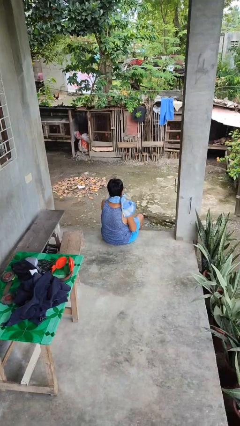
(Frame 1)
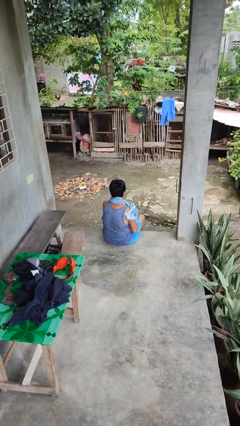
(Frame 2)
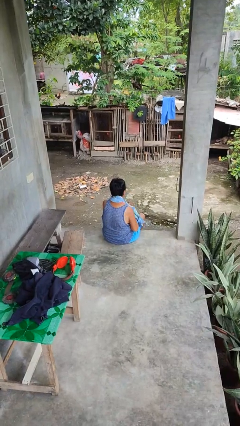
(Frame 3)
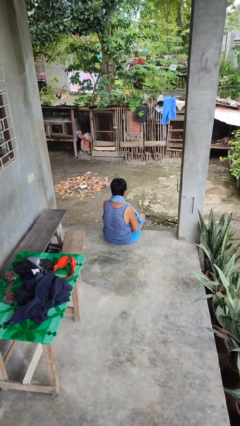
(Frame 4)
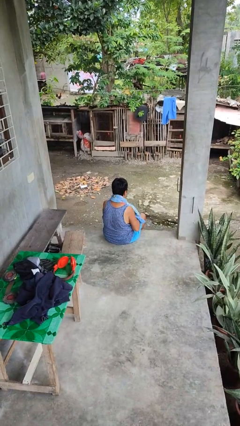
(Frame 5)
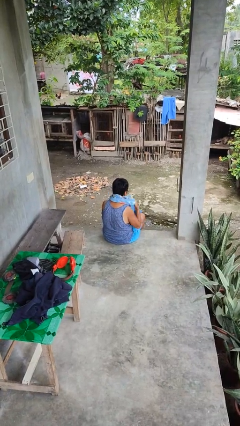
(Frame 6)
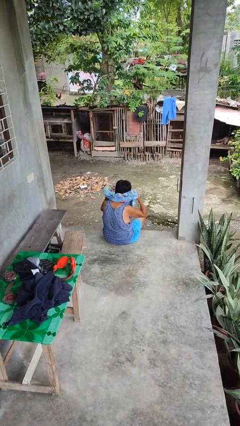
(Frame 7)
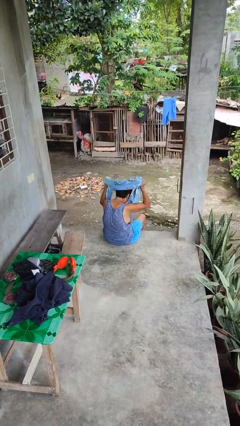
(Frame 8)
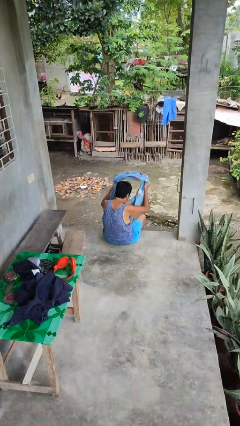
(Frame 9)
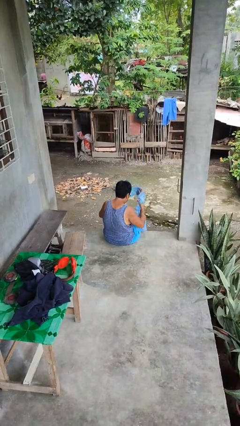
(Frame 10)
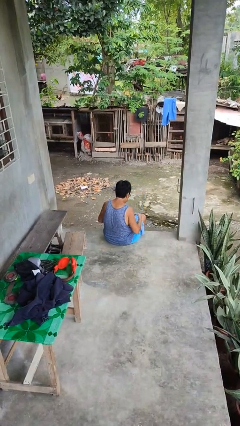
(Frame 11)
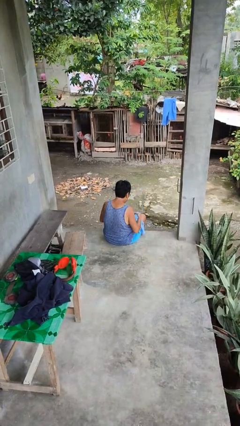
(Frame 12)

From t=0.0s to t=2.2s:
person takes off scarf

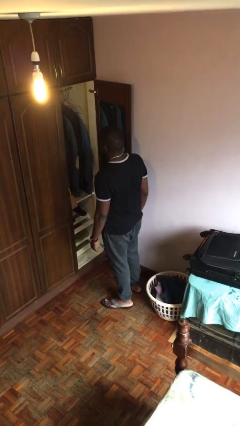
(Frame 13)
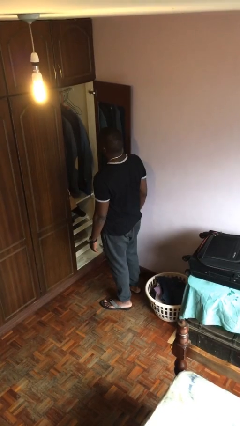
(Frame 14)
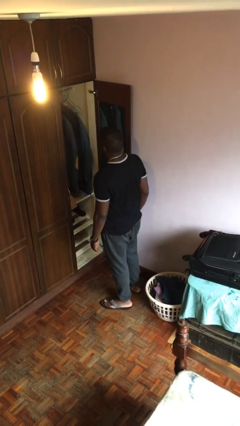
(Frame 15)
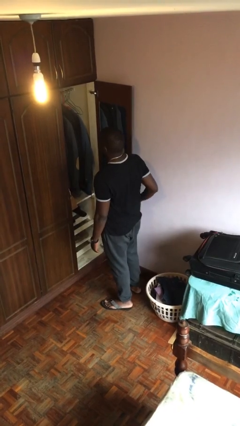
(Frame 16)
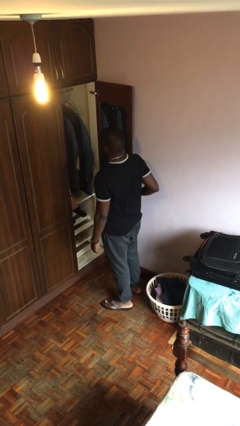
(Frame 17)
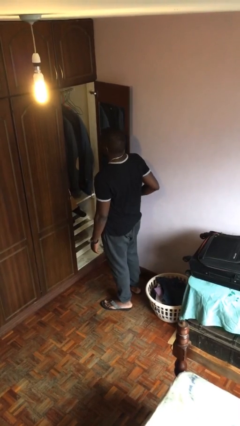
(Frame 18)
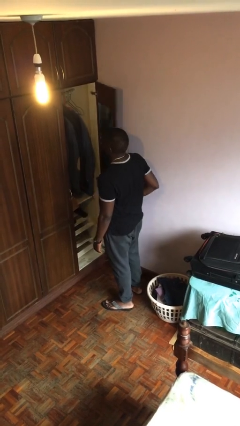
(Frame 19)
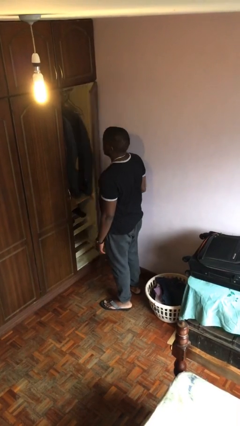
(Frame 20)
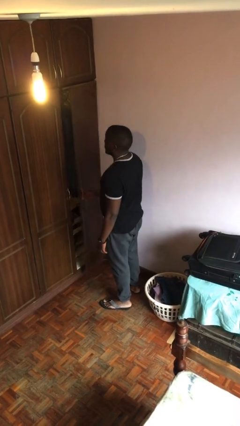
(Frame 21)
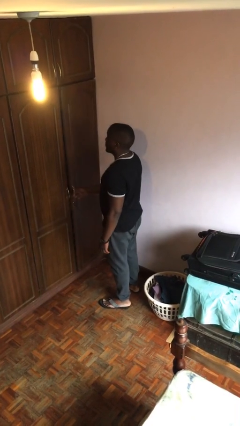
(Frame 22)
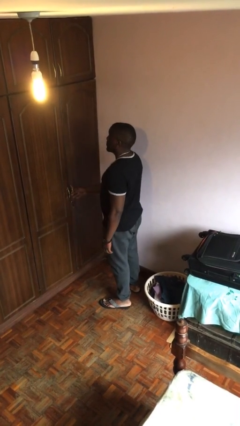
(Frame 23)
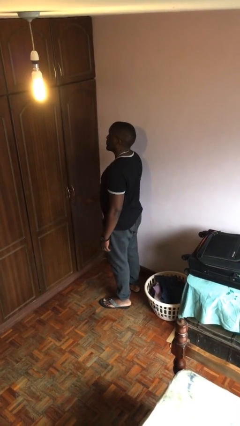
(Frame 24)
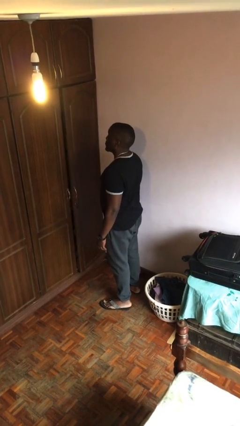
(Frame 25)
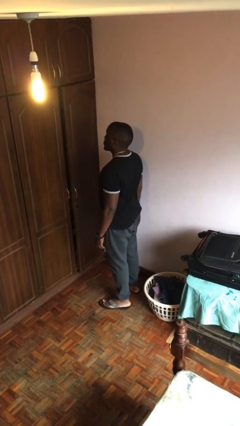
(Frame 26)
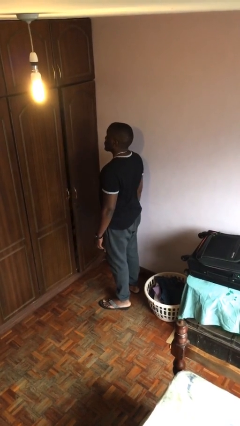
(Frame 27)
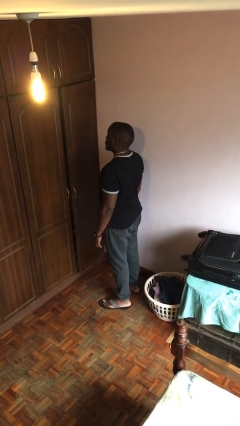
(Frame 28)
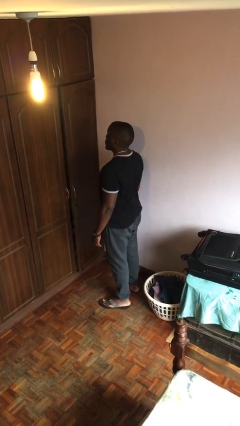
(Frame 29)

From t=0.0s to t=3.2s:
person closes closet door

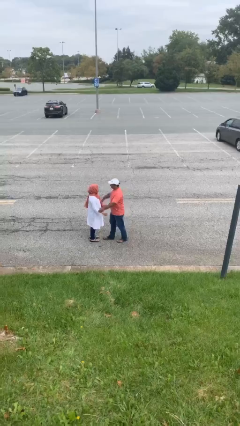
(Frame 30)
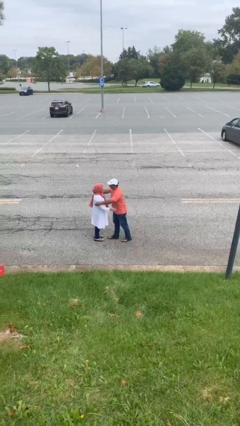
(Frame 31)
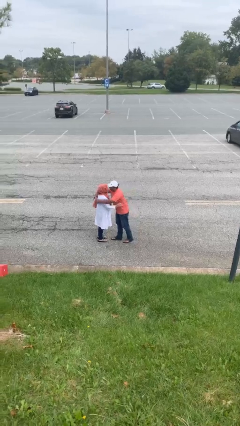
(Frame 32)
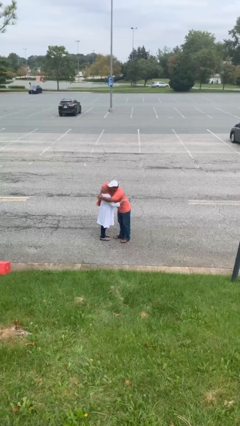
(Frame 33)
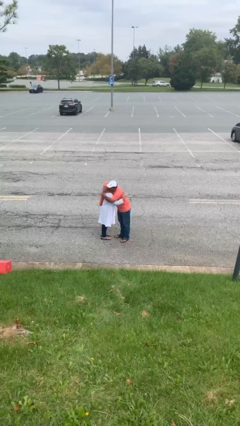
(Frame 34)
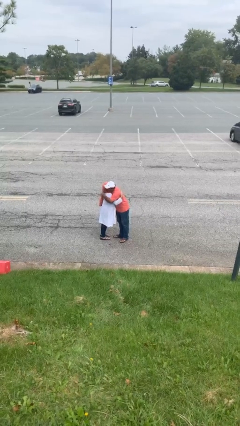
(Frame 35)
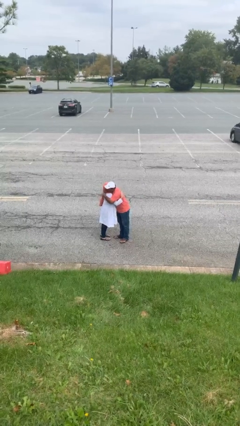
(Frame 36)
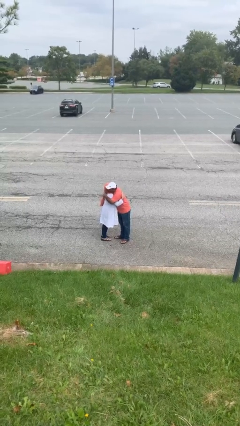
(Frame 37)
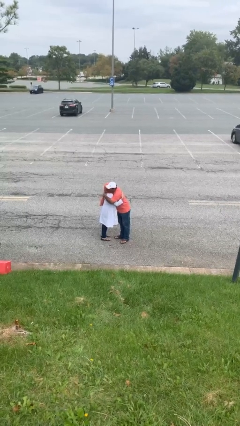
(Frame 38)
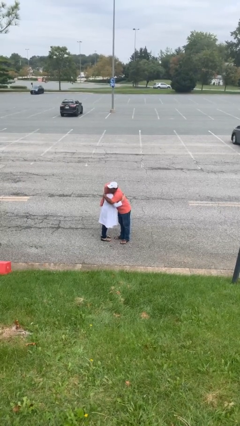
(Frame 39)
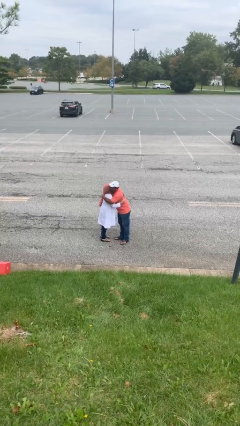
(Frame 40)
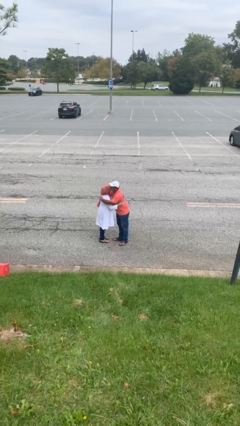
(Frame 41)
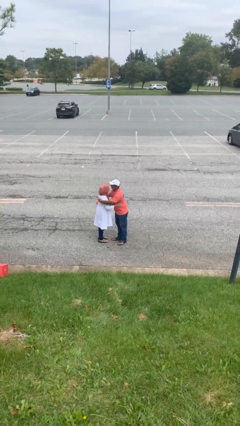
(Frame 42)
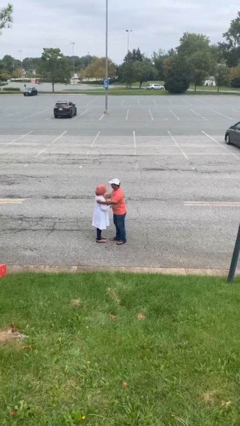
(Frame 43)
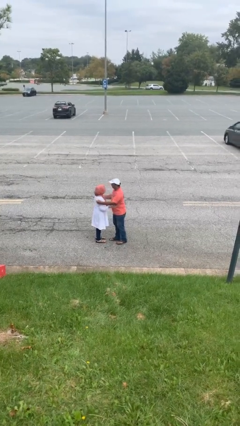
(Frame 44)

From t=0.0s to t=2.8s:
person embraces person

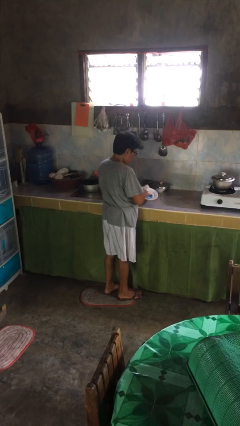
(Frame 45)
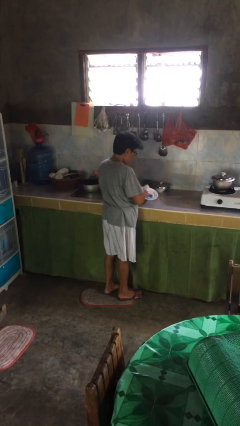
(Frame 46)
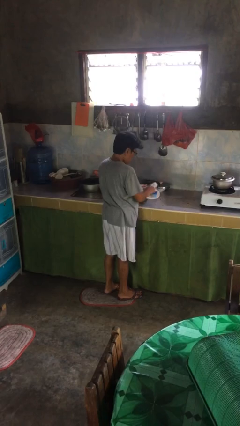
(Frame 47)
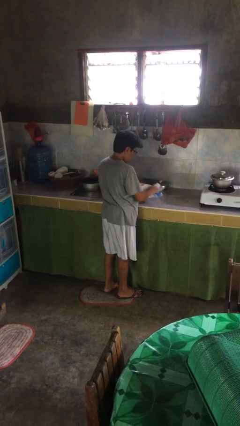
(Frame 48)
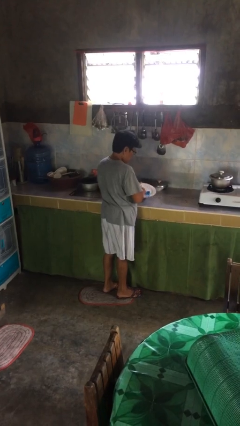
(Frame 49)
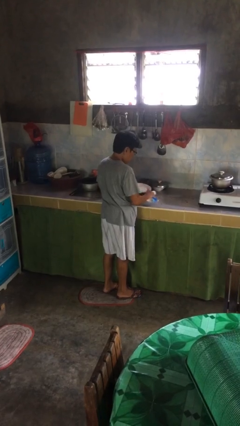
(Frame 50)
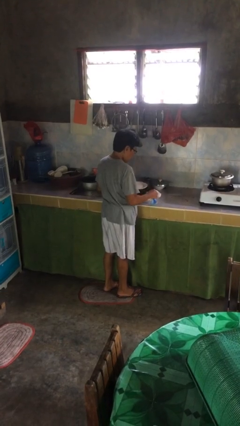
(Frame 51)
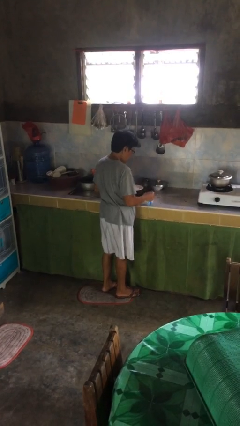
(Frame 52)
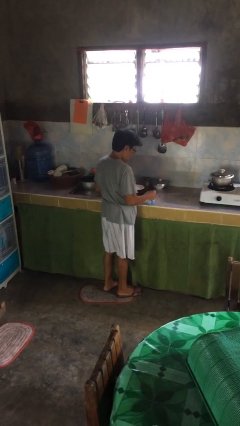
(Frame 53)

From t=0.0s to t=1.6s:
person dries dish

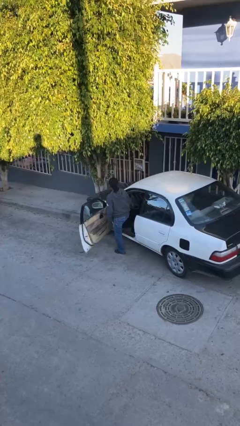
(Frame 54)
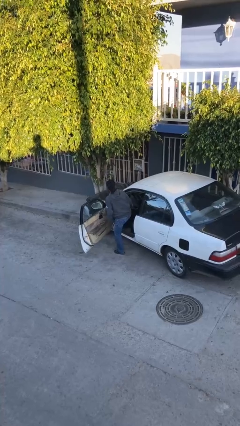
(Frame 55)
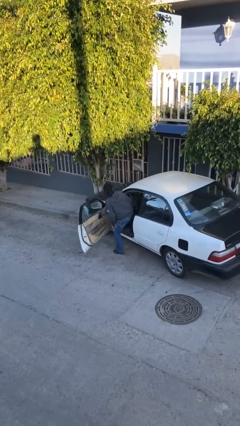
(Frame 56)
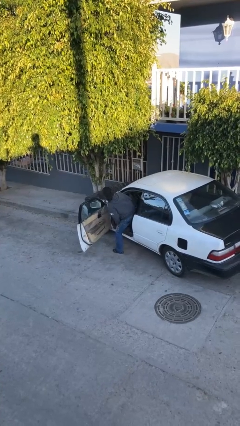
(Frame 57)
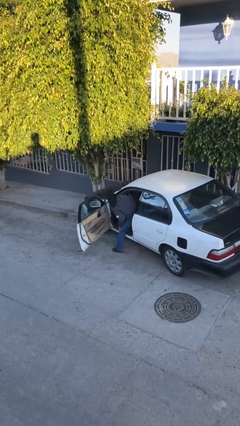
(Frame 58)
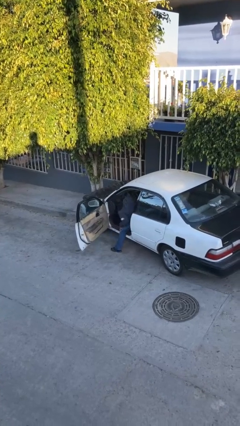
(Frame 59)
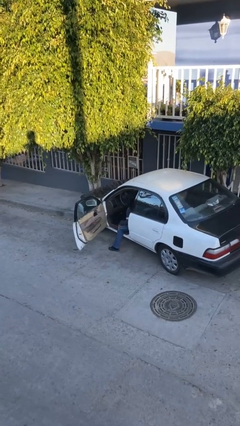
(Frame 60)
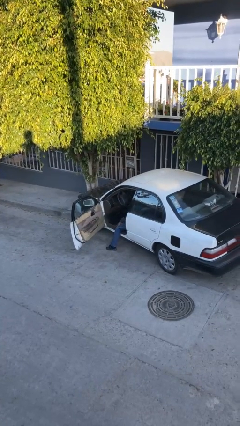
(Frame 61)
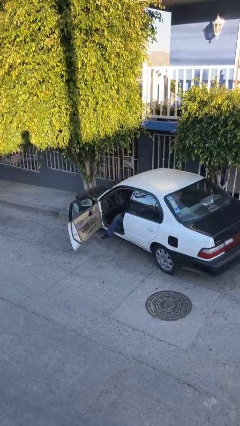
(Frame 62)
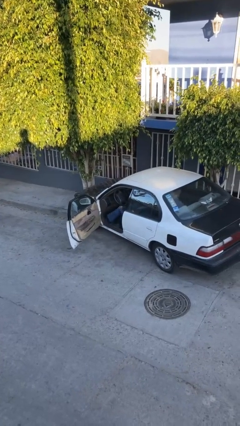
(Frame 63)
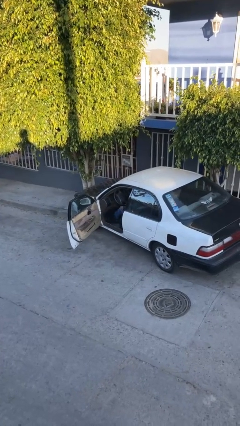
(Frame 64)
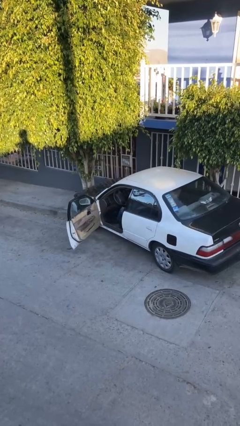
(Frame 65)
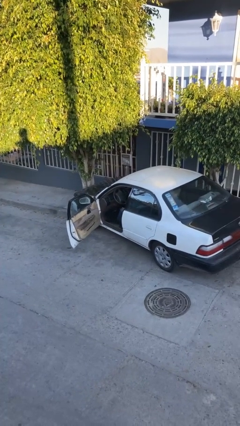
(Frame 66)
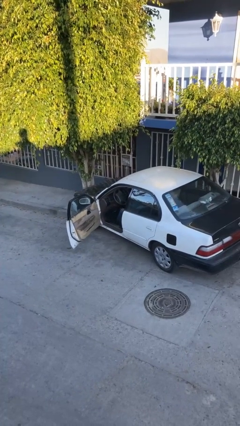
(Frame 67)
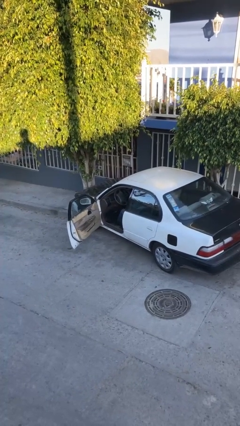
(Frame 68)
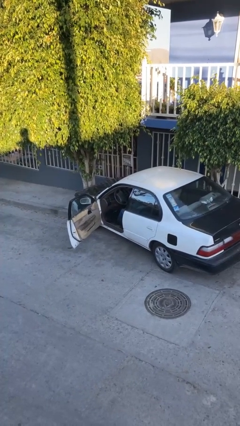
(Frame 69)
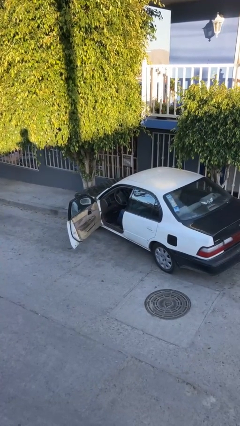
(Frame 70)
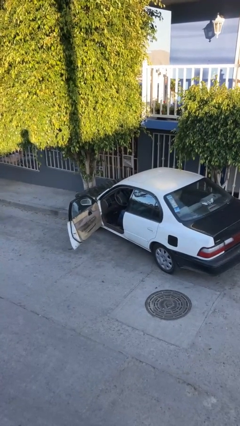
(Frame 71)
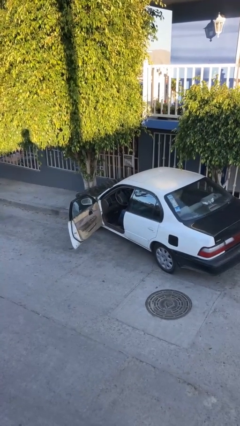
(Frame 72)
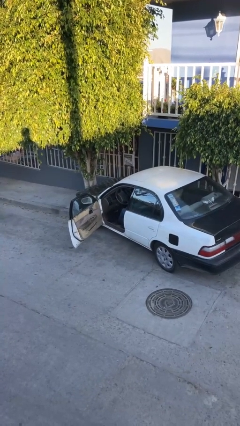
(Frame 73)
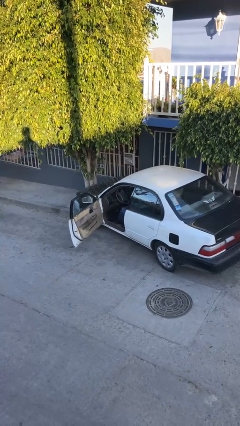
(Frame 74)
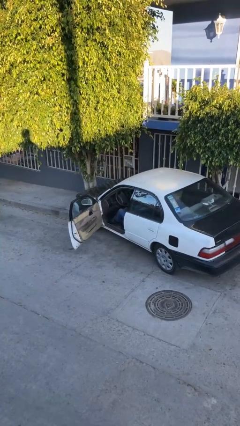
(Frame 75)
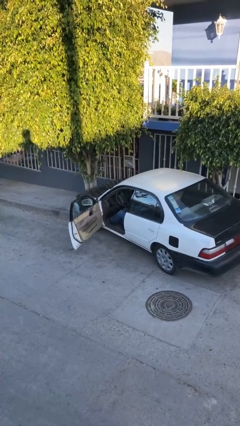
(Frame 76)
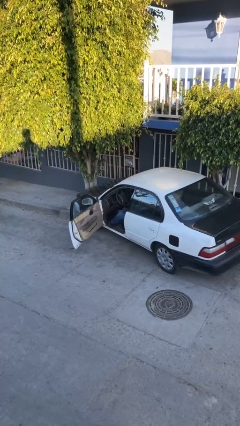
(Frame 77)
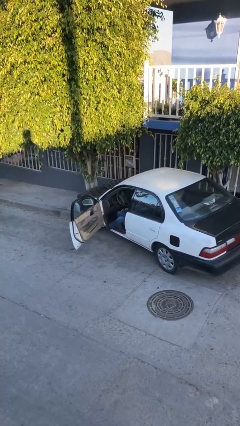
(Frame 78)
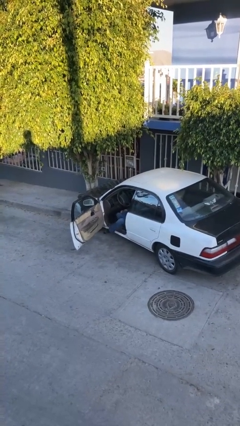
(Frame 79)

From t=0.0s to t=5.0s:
person enters car

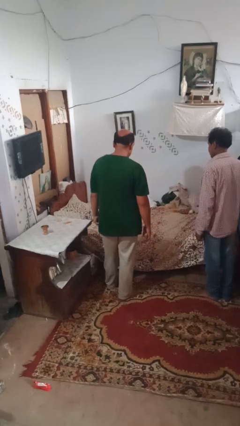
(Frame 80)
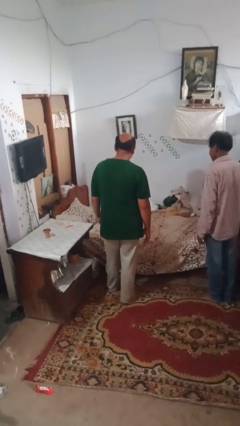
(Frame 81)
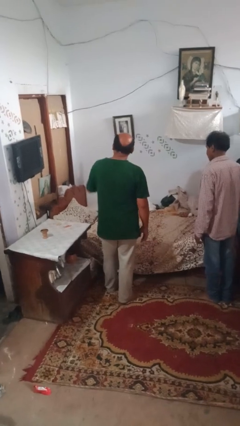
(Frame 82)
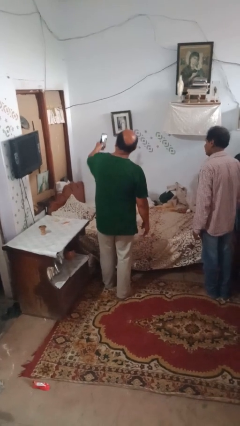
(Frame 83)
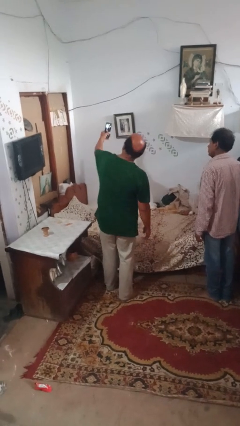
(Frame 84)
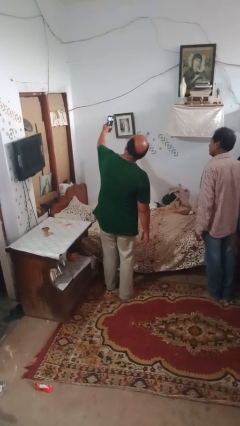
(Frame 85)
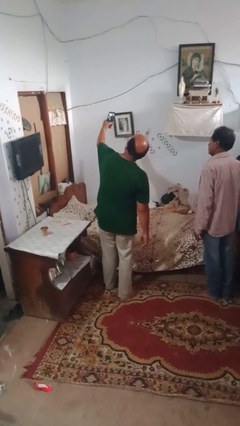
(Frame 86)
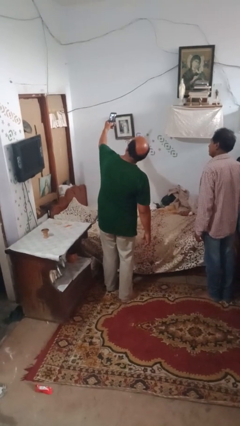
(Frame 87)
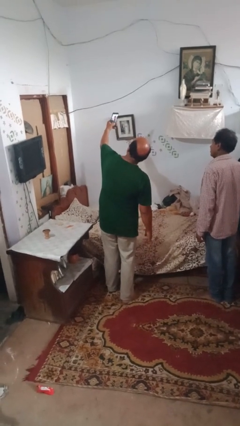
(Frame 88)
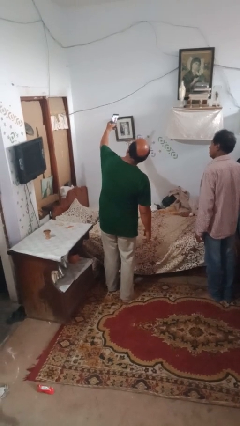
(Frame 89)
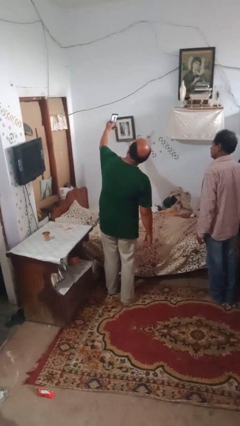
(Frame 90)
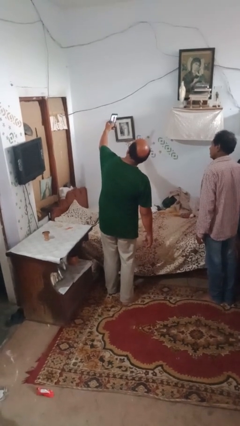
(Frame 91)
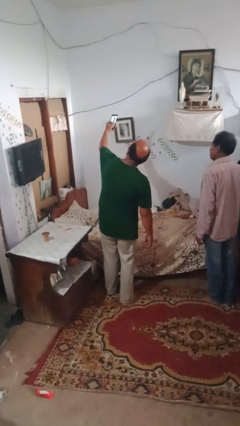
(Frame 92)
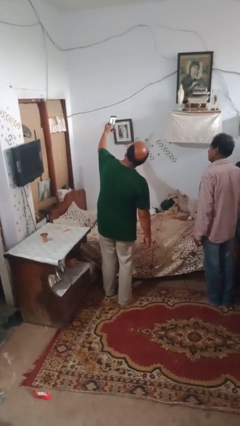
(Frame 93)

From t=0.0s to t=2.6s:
person takes selfie with person
